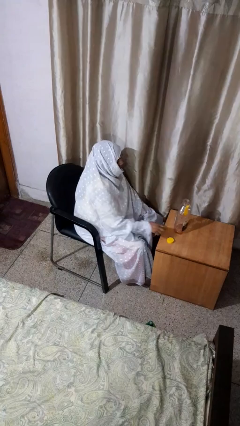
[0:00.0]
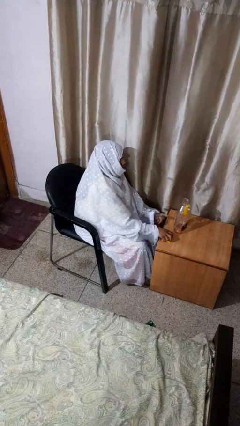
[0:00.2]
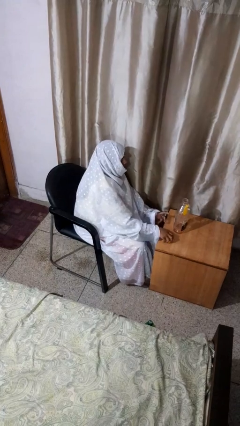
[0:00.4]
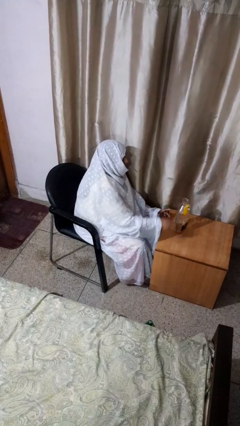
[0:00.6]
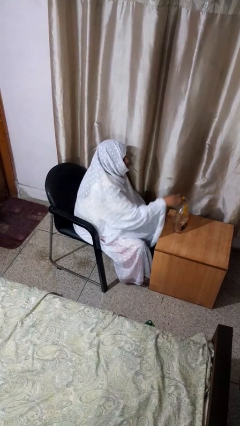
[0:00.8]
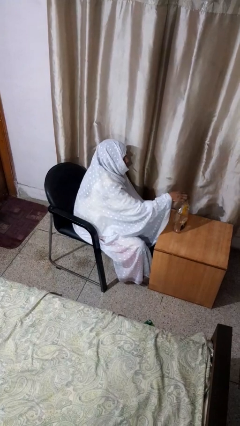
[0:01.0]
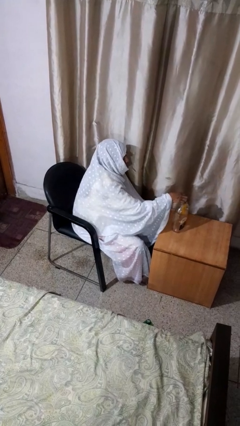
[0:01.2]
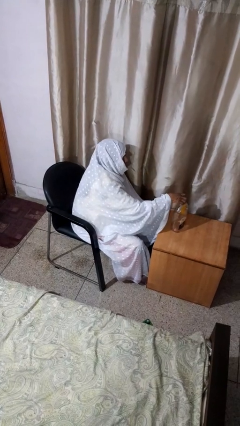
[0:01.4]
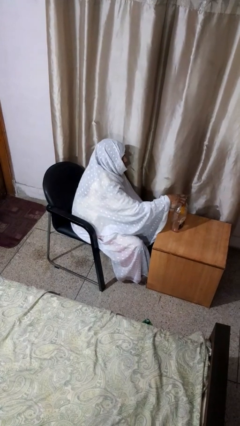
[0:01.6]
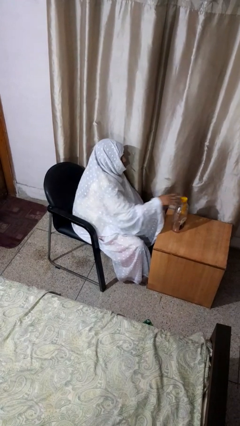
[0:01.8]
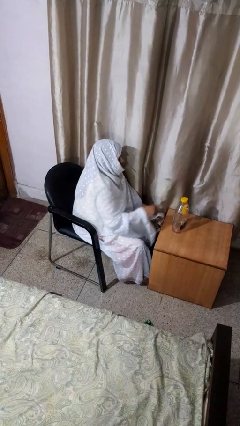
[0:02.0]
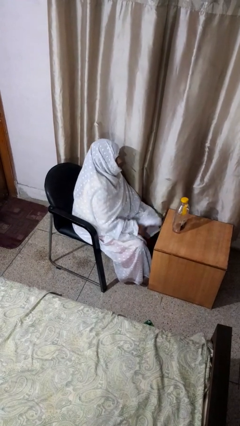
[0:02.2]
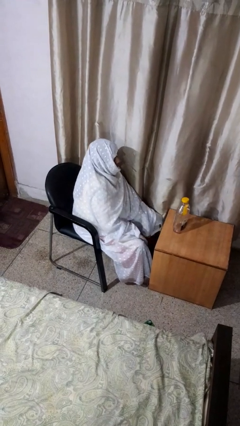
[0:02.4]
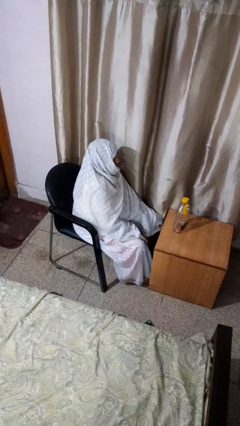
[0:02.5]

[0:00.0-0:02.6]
person screws lid to bottle

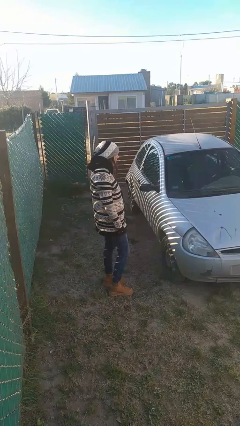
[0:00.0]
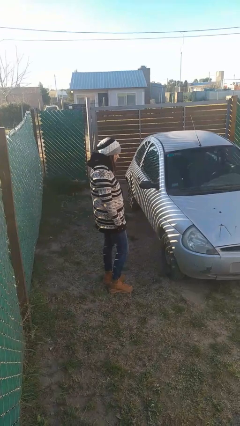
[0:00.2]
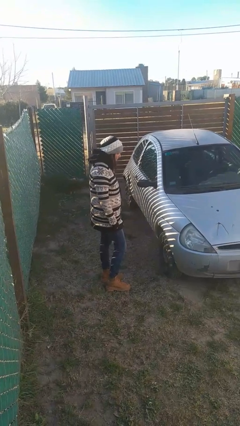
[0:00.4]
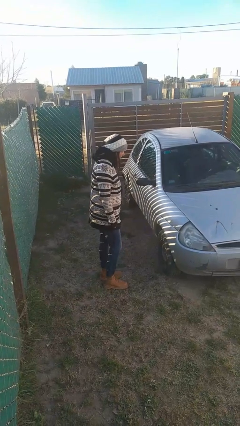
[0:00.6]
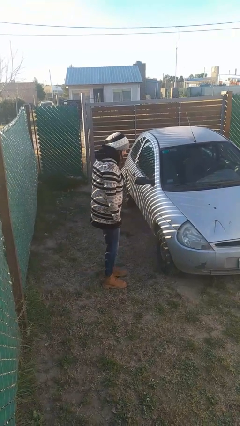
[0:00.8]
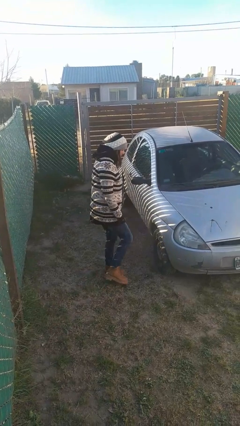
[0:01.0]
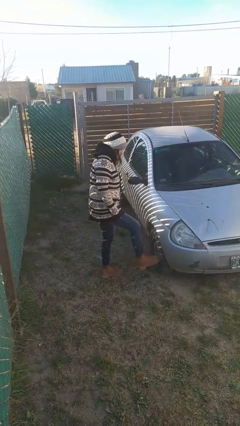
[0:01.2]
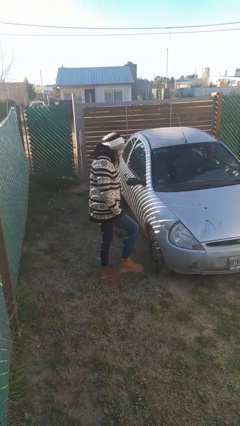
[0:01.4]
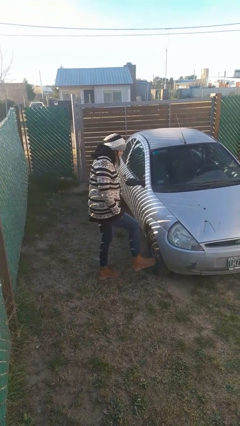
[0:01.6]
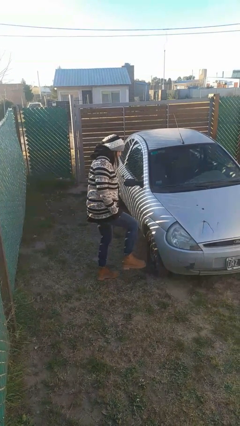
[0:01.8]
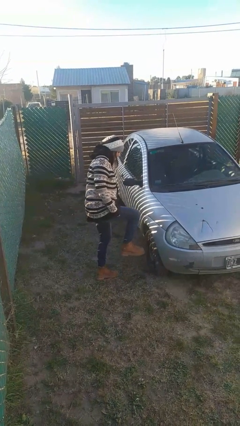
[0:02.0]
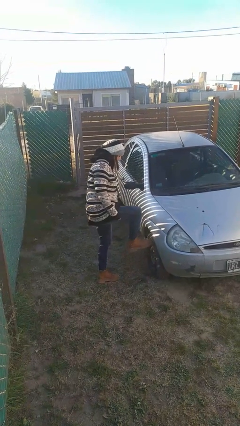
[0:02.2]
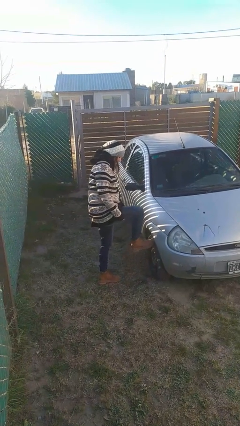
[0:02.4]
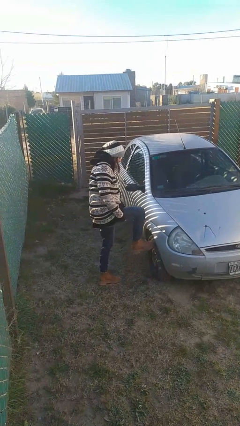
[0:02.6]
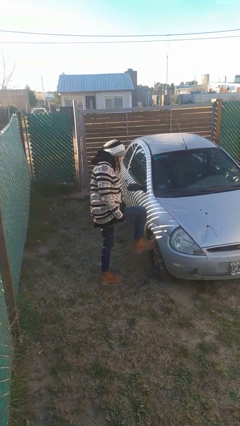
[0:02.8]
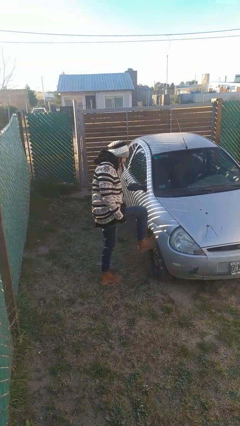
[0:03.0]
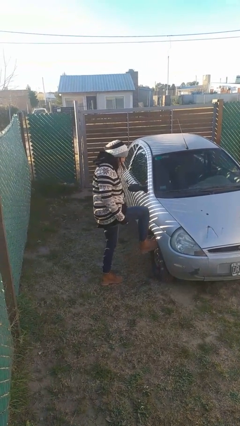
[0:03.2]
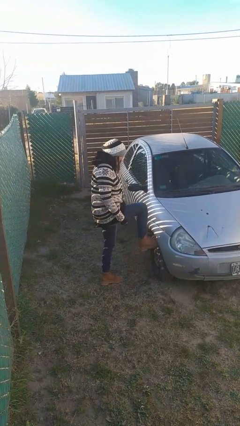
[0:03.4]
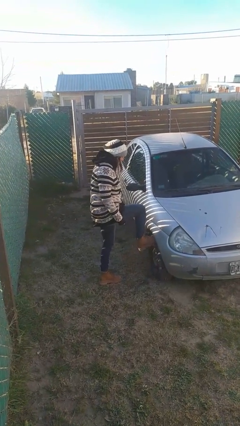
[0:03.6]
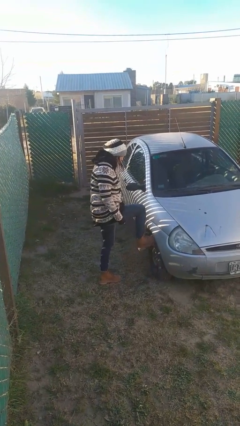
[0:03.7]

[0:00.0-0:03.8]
person kicks car tires

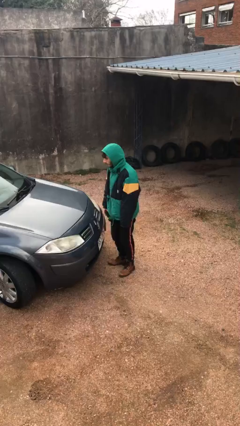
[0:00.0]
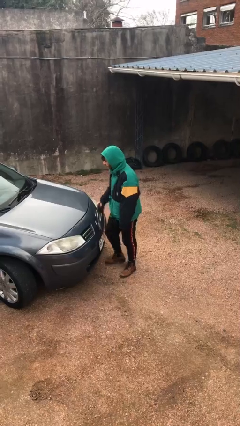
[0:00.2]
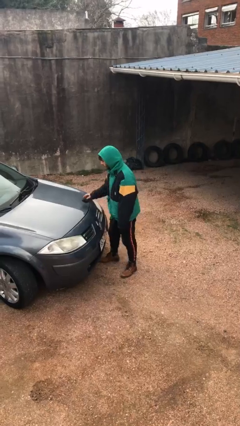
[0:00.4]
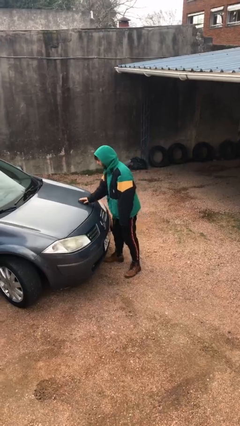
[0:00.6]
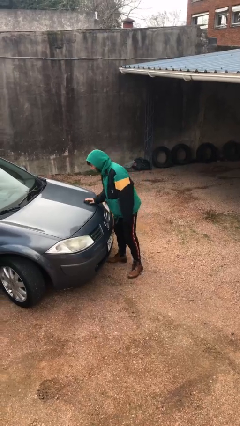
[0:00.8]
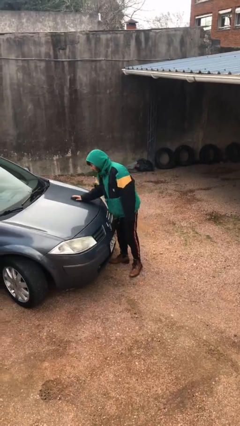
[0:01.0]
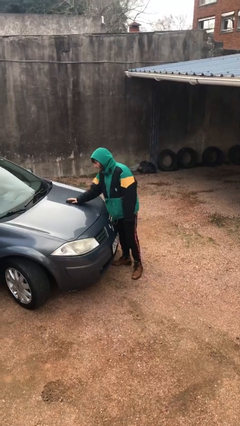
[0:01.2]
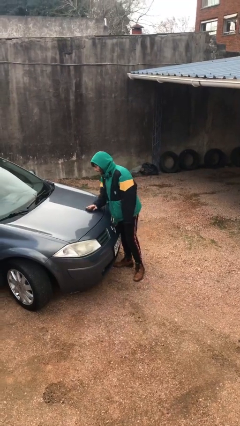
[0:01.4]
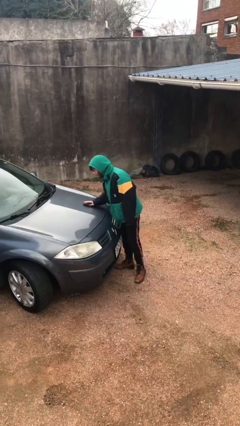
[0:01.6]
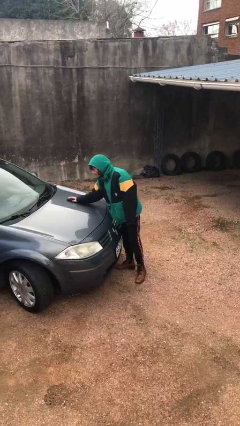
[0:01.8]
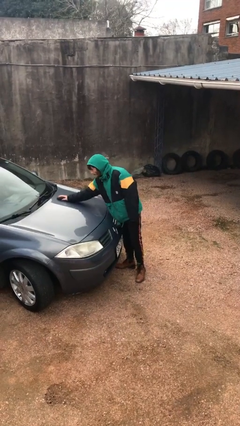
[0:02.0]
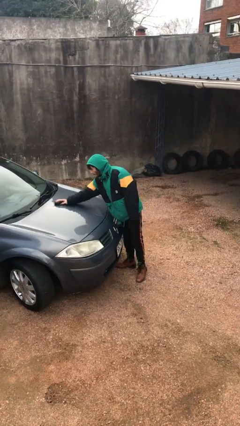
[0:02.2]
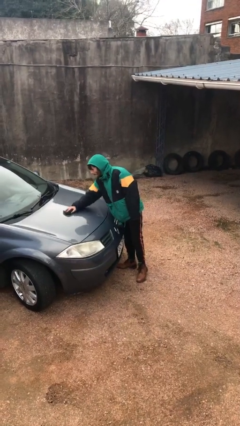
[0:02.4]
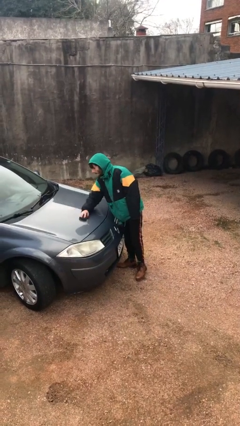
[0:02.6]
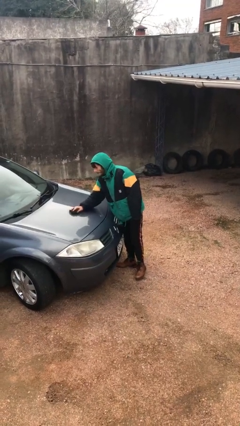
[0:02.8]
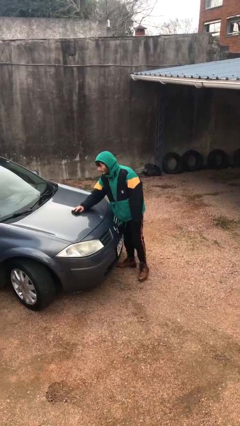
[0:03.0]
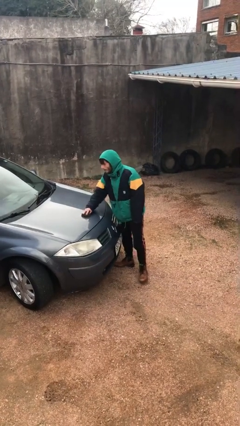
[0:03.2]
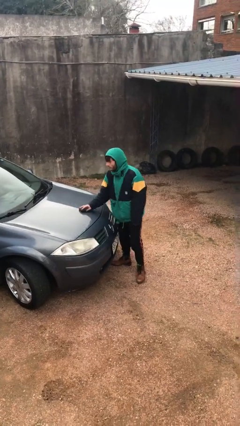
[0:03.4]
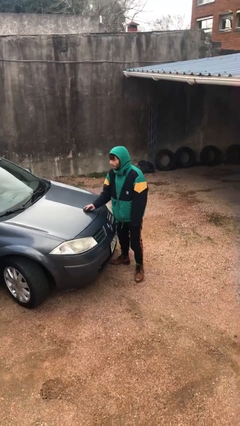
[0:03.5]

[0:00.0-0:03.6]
person polishes car with rag

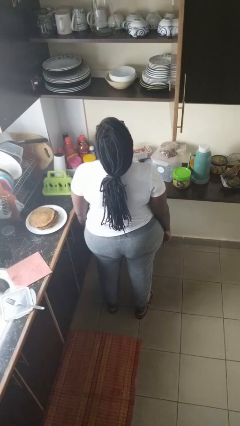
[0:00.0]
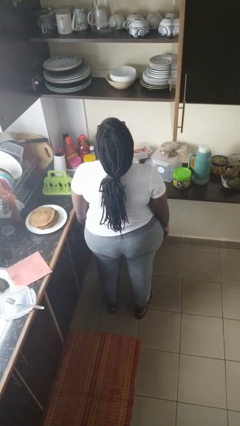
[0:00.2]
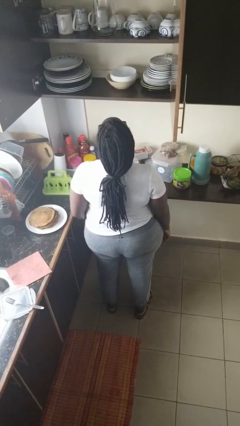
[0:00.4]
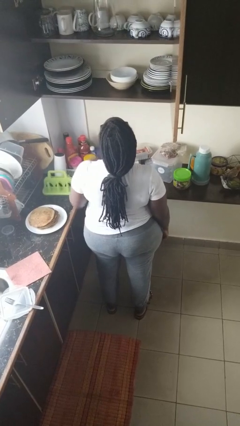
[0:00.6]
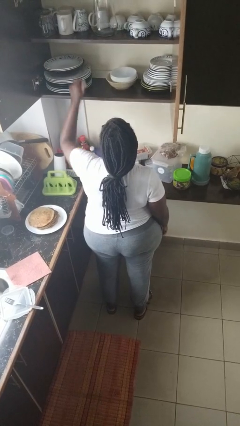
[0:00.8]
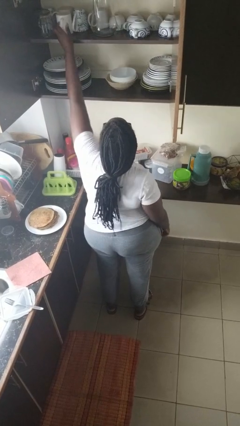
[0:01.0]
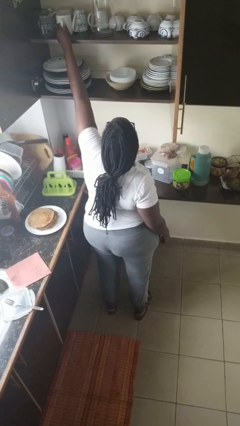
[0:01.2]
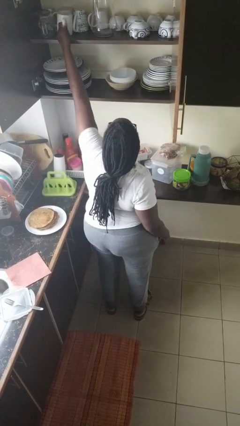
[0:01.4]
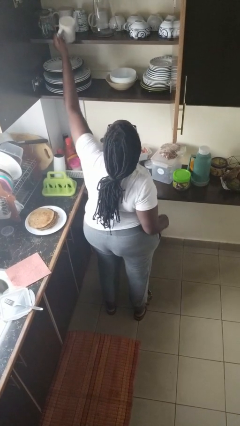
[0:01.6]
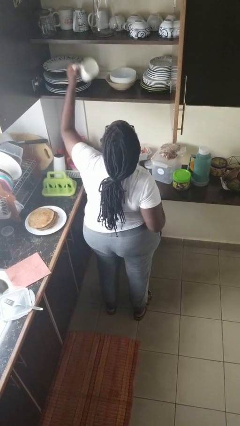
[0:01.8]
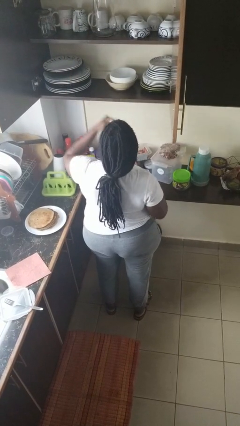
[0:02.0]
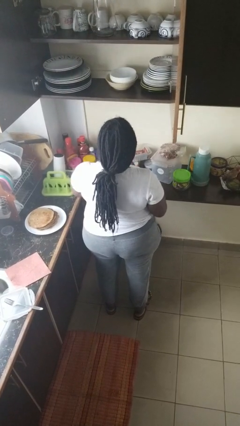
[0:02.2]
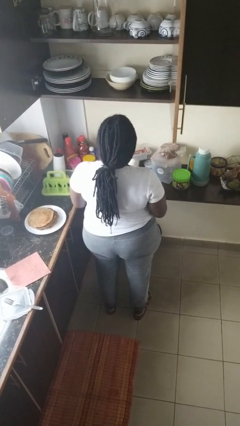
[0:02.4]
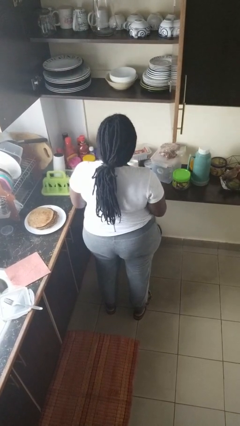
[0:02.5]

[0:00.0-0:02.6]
person takes object from cabinet

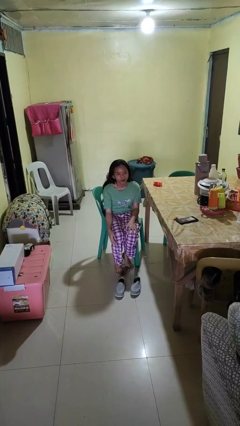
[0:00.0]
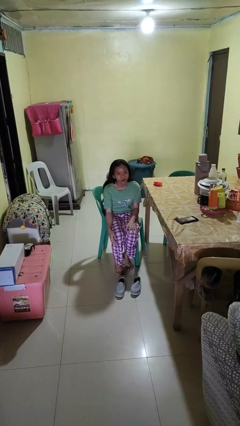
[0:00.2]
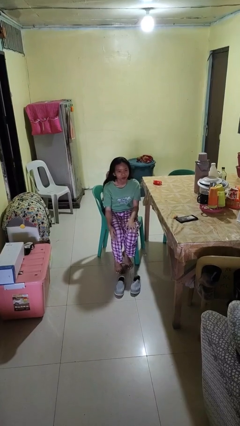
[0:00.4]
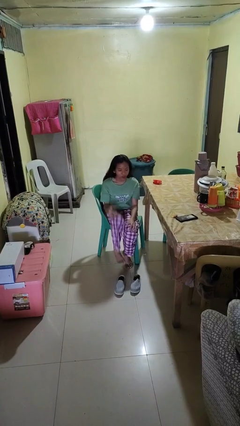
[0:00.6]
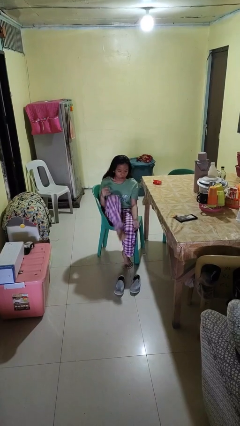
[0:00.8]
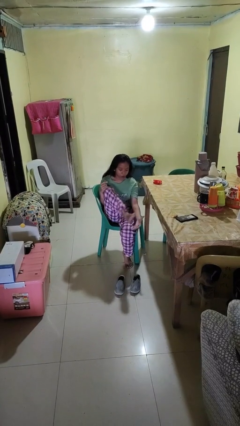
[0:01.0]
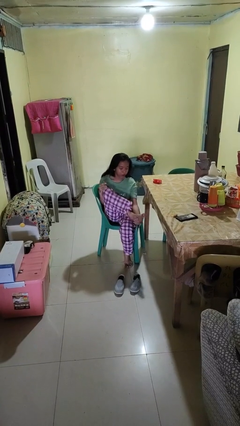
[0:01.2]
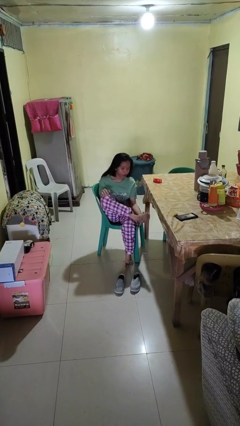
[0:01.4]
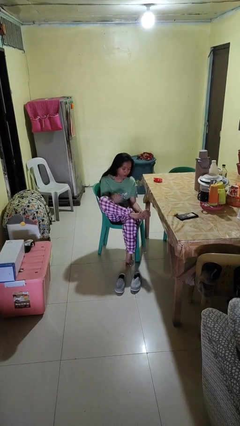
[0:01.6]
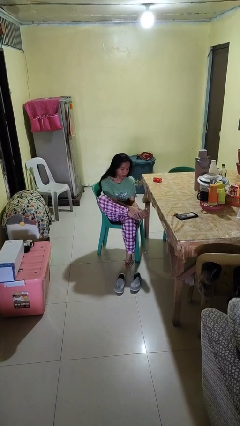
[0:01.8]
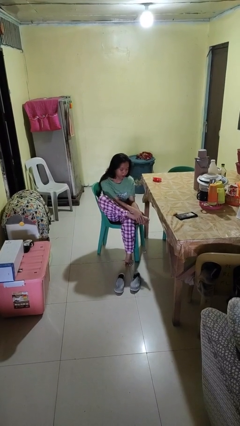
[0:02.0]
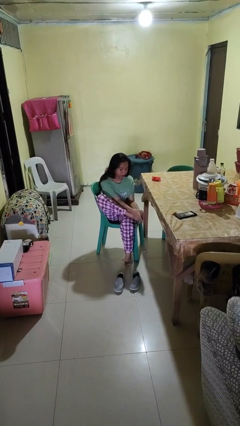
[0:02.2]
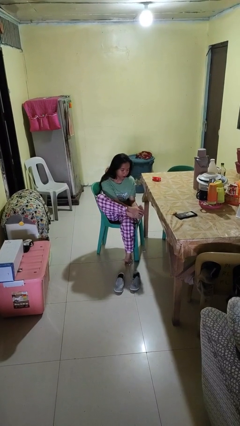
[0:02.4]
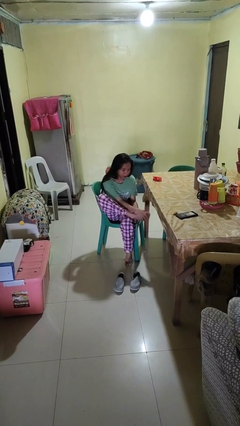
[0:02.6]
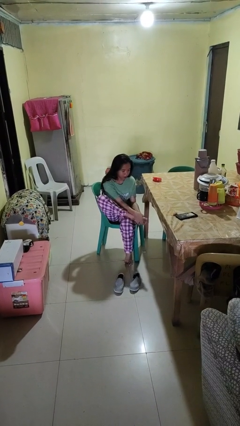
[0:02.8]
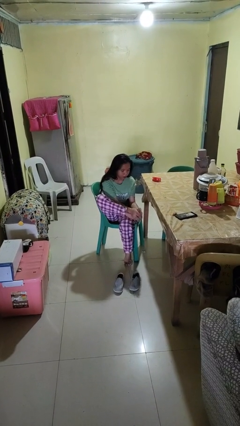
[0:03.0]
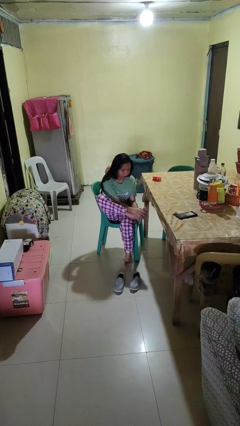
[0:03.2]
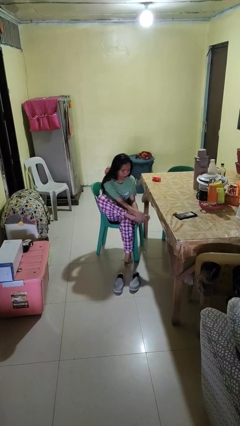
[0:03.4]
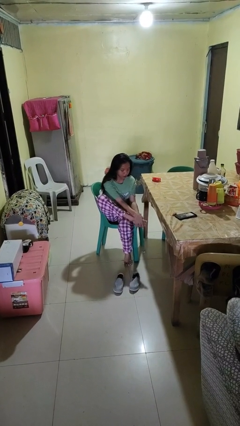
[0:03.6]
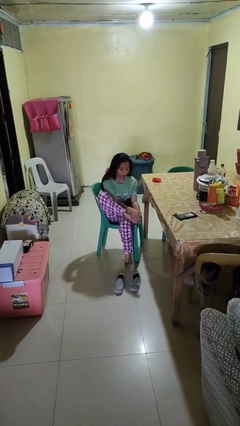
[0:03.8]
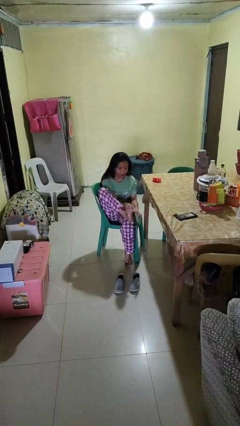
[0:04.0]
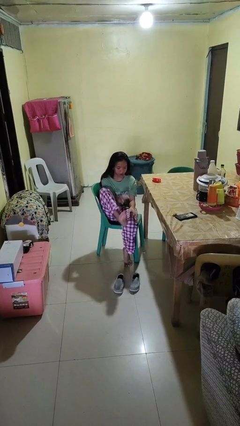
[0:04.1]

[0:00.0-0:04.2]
person rubs foot

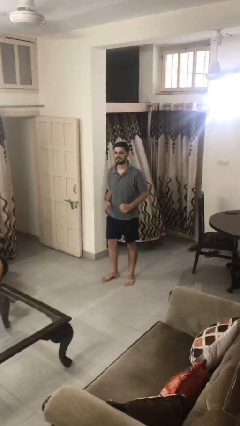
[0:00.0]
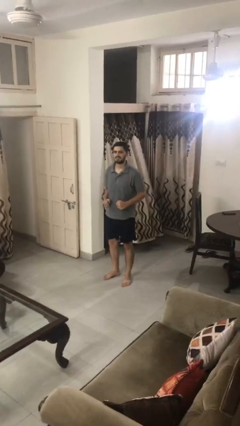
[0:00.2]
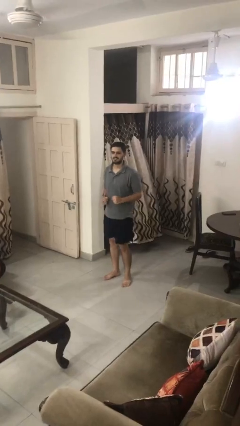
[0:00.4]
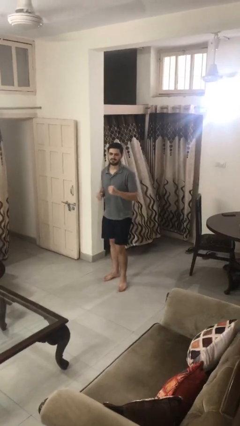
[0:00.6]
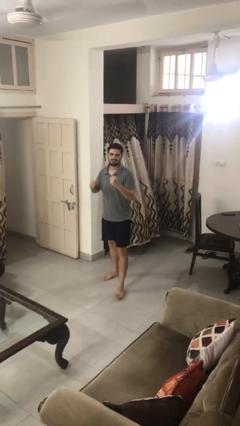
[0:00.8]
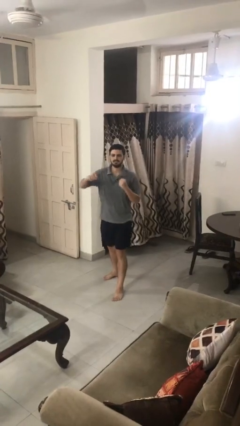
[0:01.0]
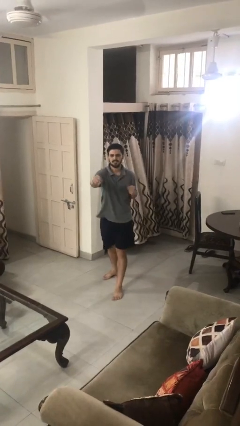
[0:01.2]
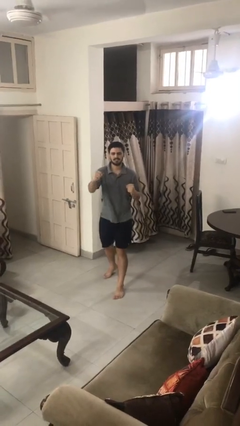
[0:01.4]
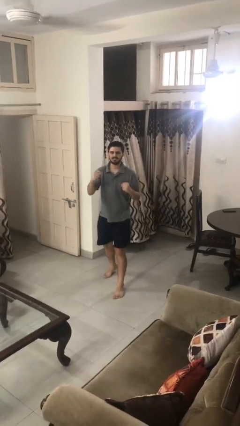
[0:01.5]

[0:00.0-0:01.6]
person karate chop
